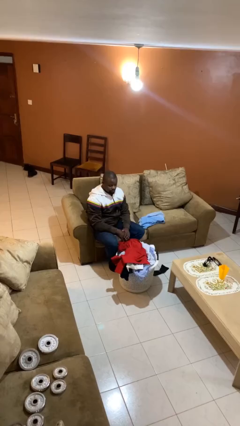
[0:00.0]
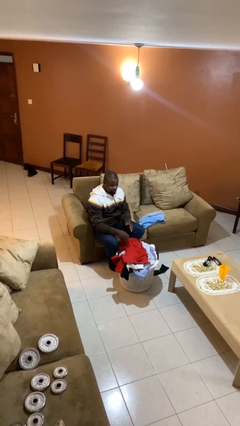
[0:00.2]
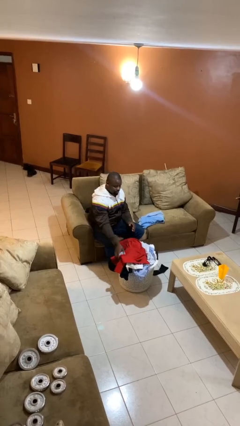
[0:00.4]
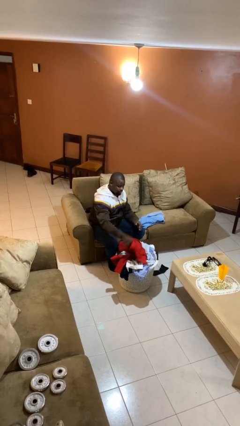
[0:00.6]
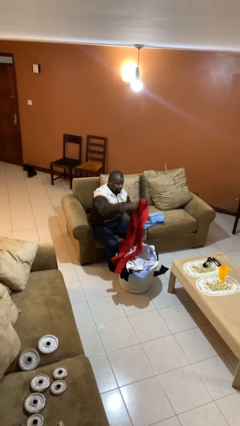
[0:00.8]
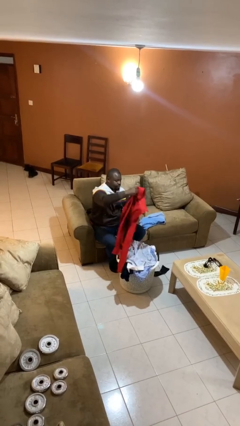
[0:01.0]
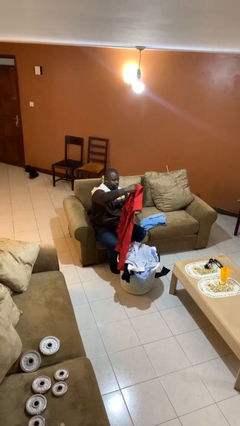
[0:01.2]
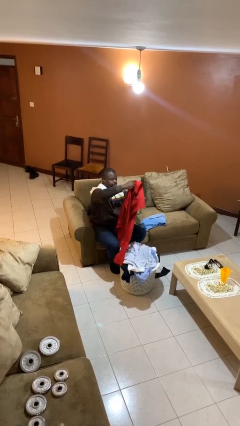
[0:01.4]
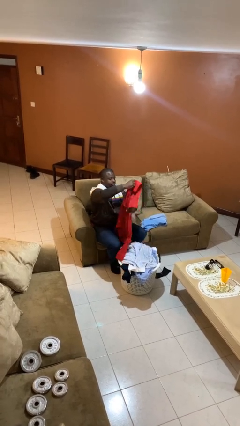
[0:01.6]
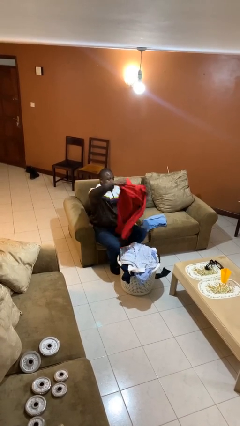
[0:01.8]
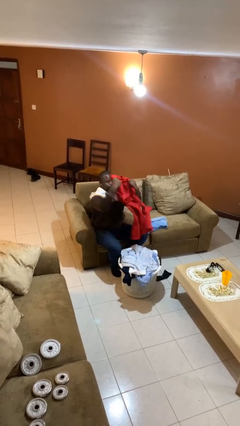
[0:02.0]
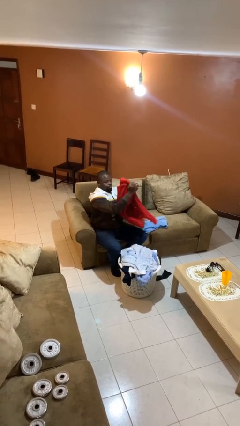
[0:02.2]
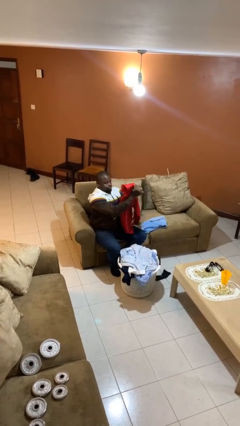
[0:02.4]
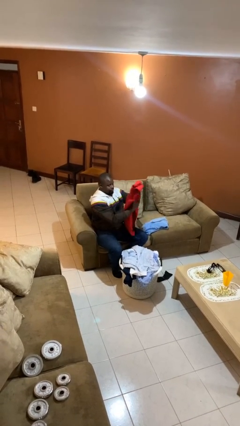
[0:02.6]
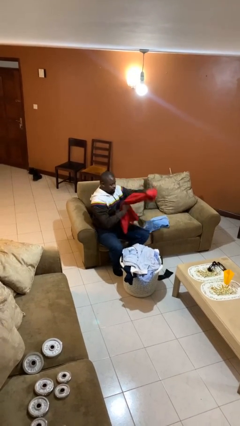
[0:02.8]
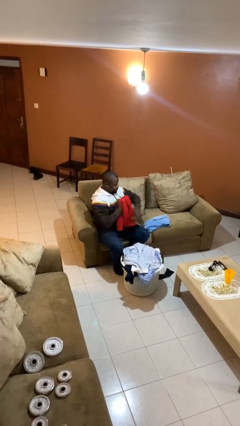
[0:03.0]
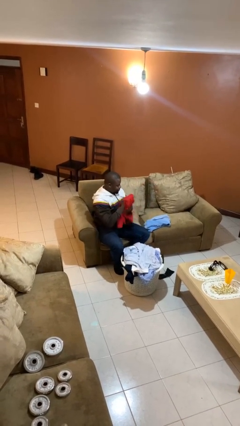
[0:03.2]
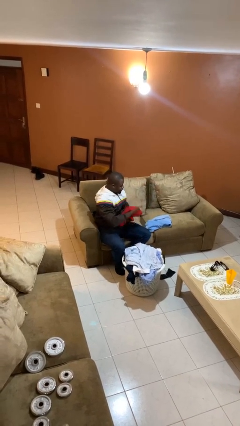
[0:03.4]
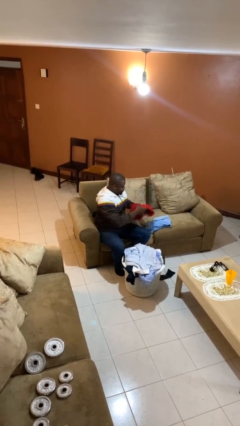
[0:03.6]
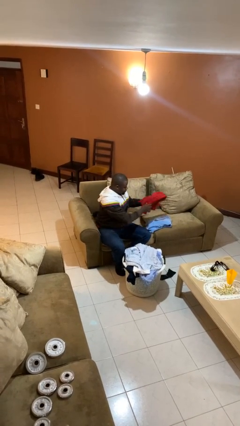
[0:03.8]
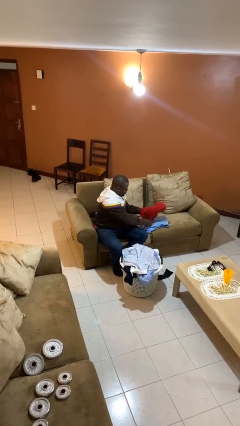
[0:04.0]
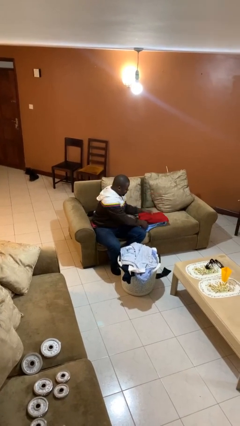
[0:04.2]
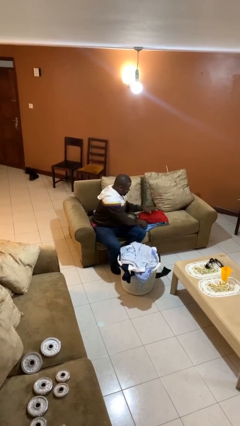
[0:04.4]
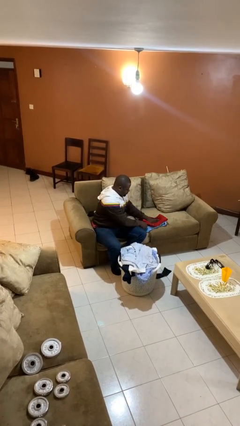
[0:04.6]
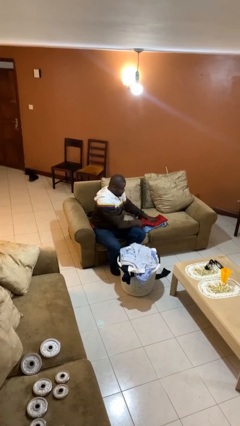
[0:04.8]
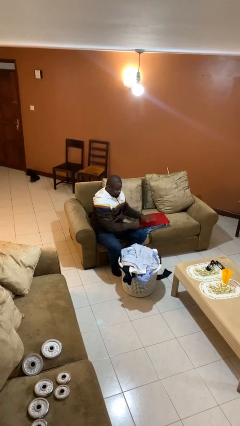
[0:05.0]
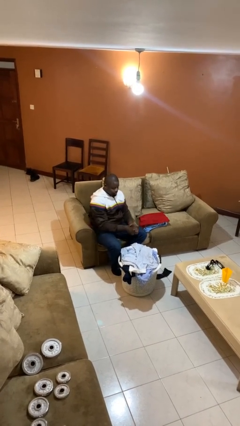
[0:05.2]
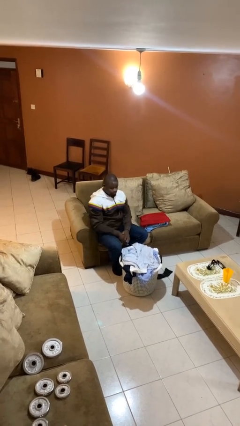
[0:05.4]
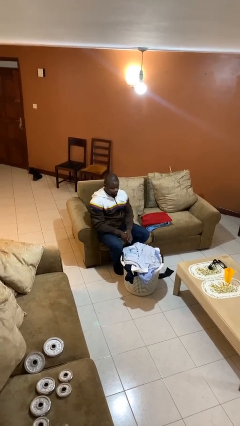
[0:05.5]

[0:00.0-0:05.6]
person folds shirt

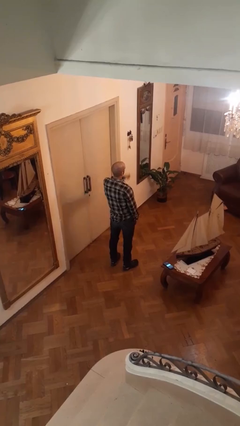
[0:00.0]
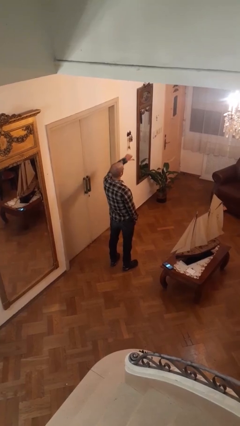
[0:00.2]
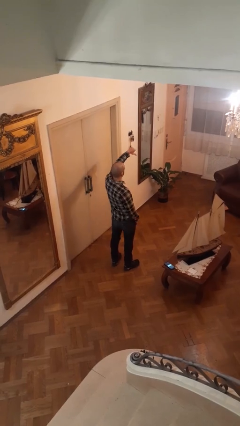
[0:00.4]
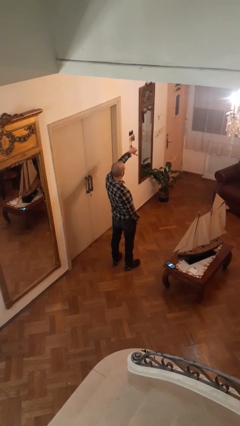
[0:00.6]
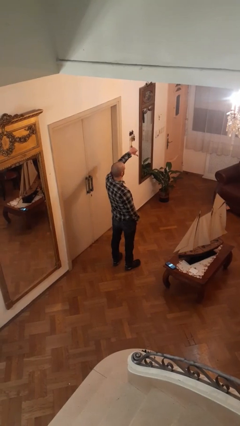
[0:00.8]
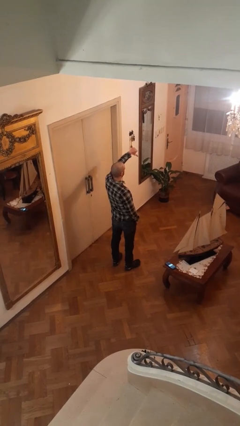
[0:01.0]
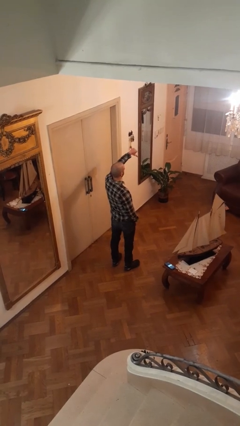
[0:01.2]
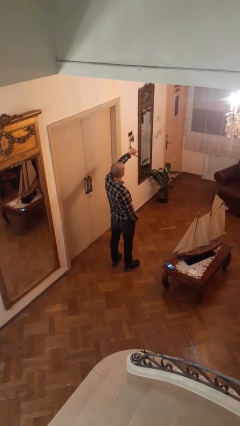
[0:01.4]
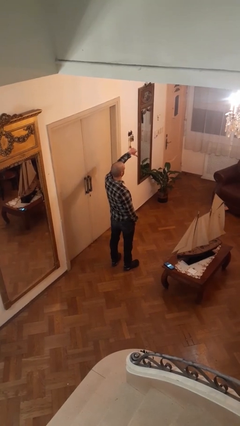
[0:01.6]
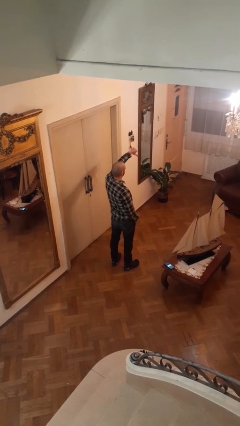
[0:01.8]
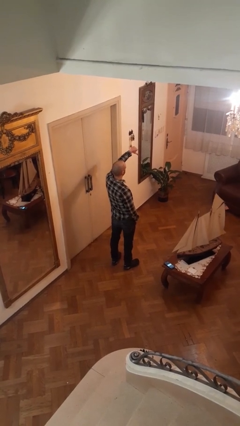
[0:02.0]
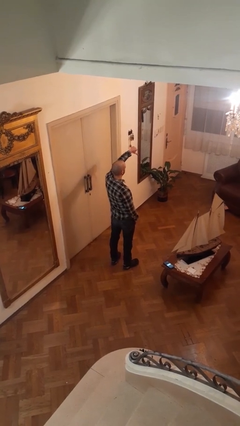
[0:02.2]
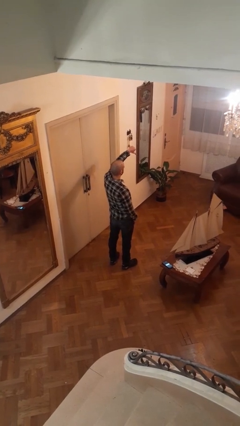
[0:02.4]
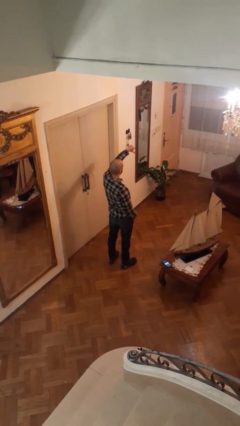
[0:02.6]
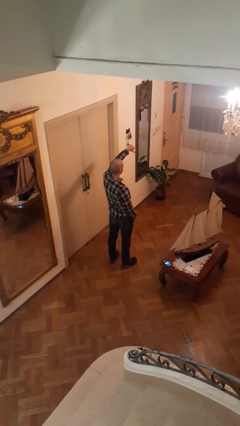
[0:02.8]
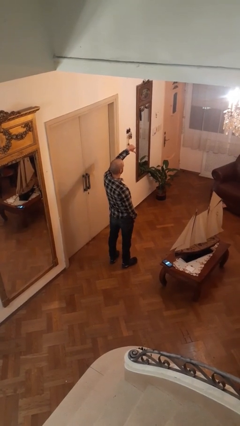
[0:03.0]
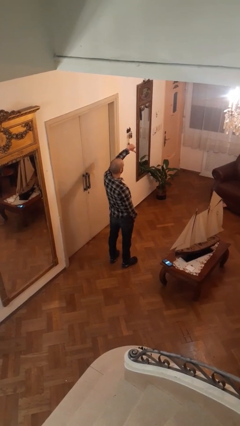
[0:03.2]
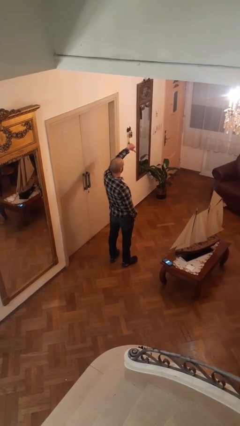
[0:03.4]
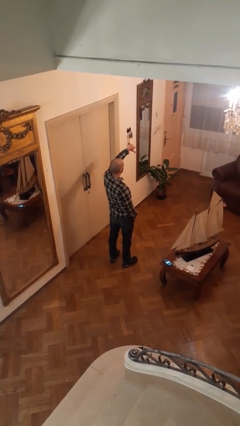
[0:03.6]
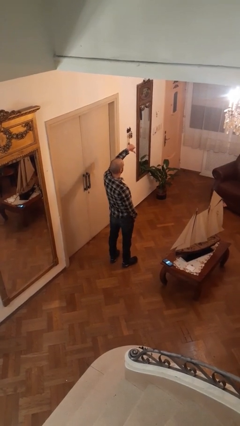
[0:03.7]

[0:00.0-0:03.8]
person gestures thumbs down

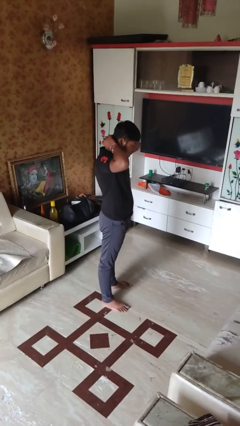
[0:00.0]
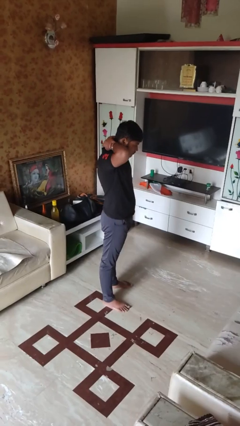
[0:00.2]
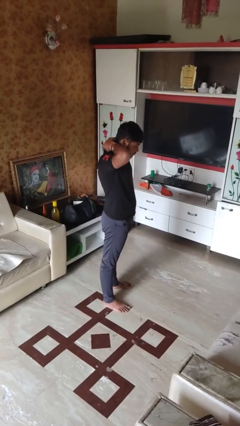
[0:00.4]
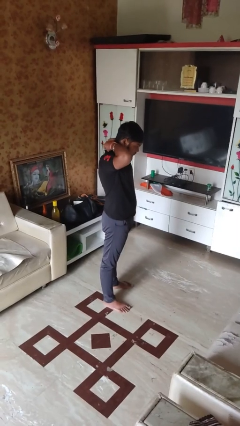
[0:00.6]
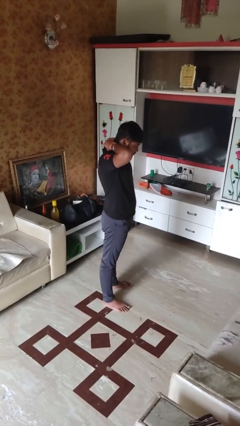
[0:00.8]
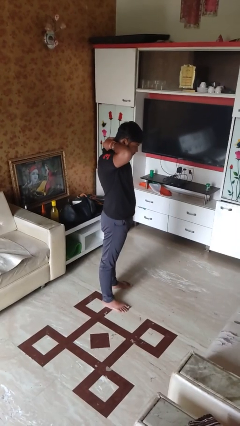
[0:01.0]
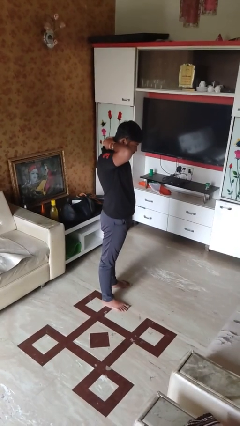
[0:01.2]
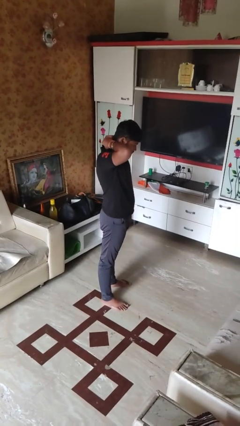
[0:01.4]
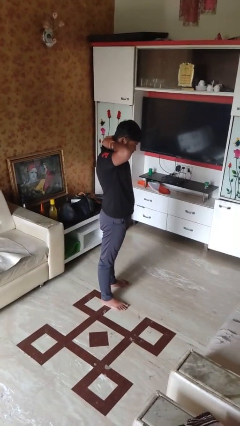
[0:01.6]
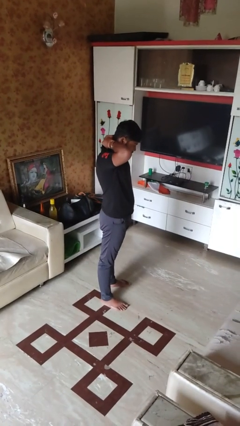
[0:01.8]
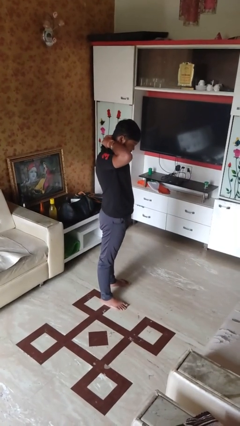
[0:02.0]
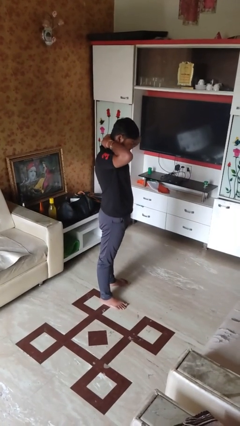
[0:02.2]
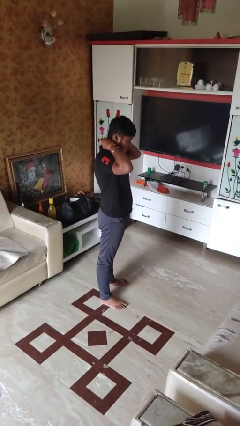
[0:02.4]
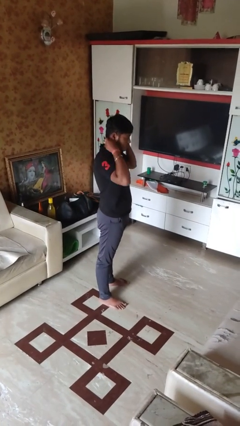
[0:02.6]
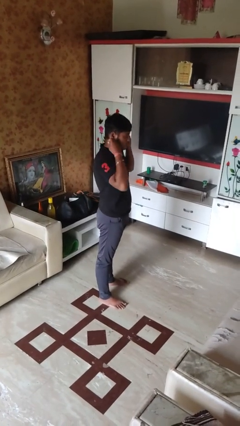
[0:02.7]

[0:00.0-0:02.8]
person takes off necklace

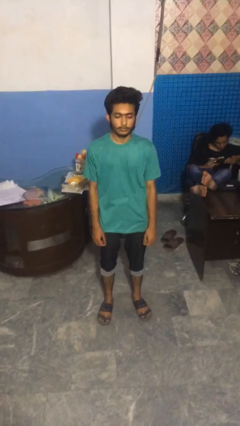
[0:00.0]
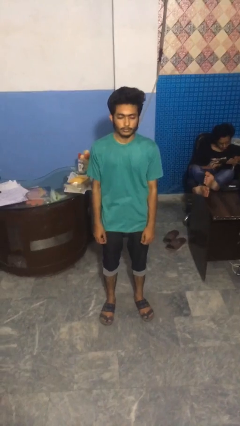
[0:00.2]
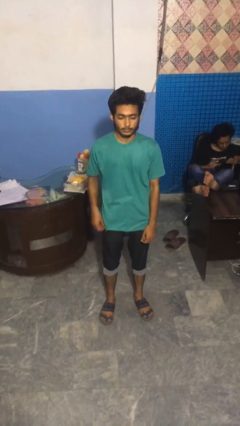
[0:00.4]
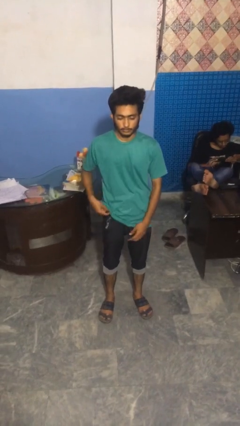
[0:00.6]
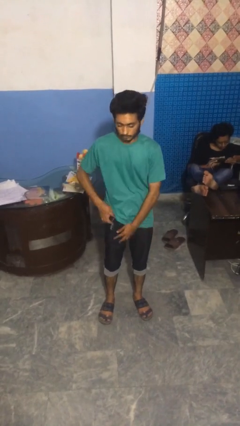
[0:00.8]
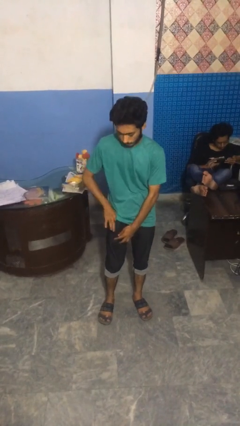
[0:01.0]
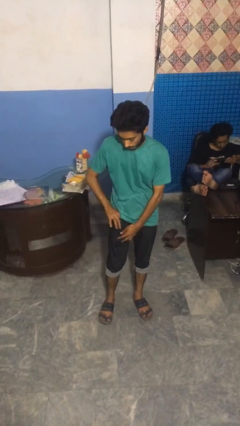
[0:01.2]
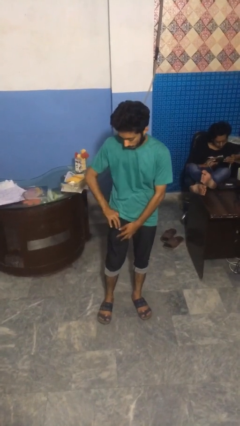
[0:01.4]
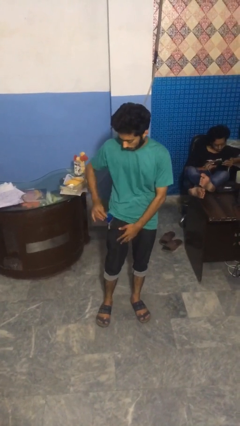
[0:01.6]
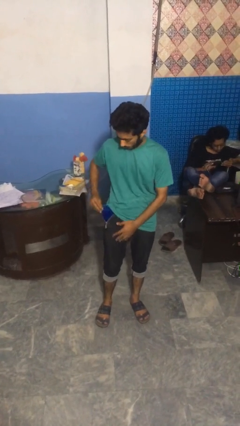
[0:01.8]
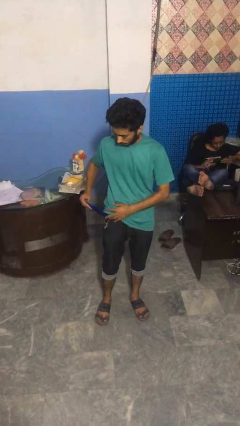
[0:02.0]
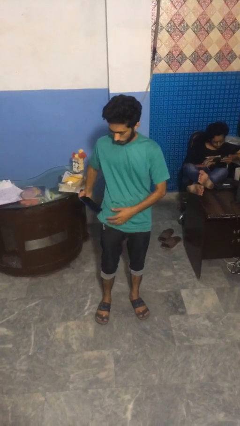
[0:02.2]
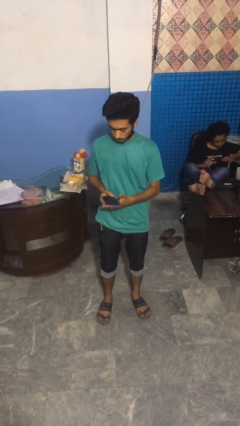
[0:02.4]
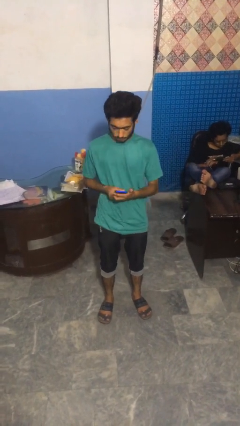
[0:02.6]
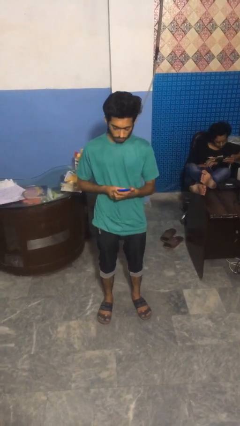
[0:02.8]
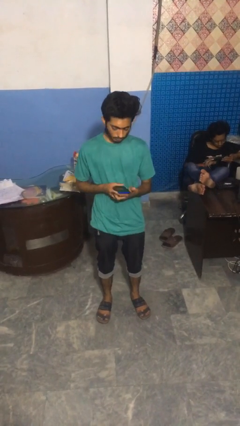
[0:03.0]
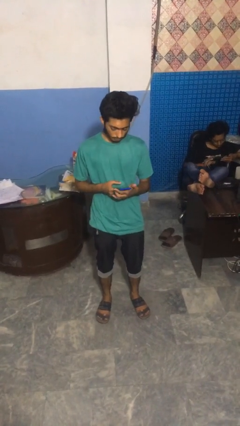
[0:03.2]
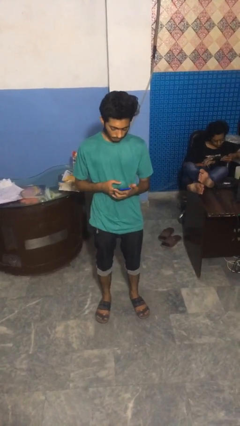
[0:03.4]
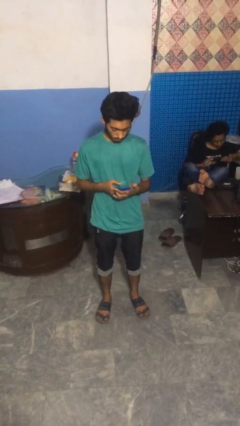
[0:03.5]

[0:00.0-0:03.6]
person takes phone from pocket

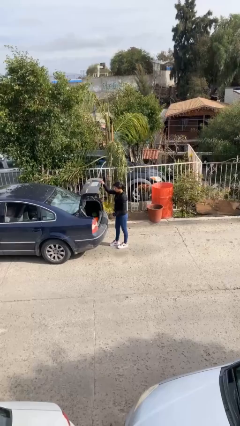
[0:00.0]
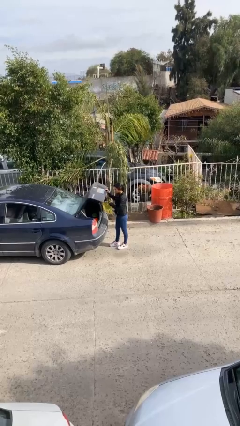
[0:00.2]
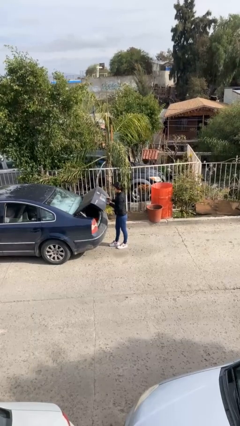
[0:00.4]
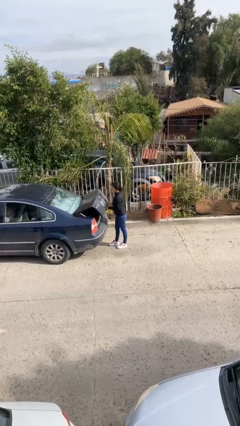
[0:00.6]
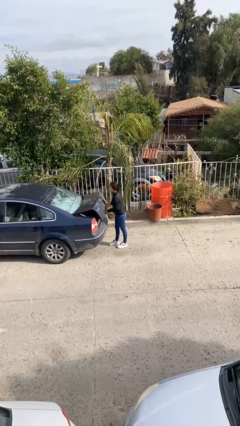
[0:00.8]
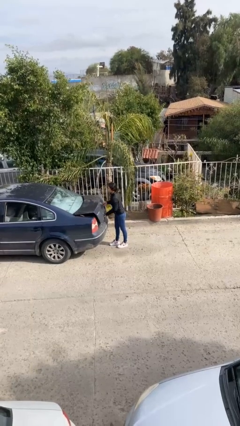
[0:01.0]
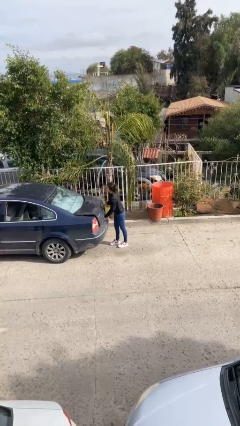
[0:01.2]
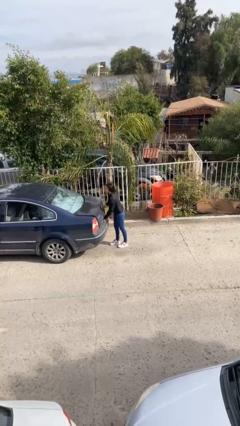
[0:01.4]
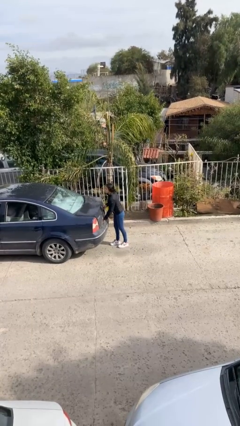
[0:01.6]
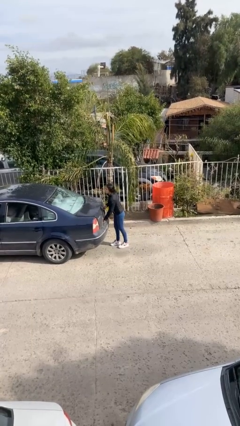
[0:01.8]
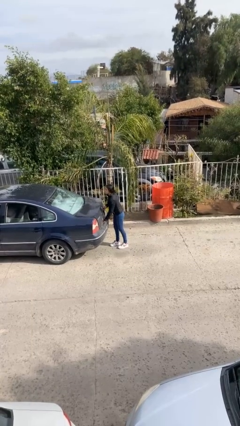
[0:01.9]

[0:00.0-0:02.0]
person closes car trunk
